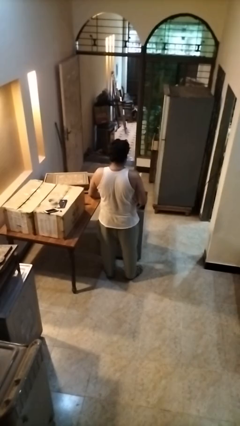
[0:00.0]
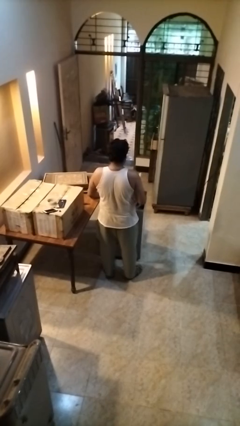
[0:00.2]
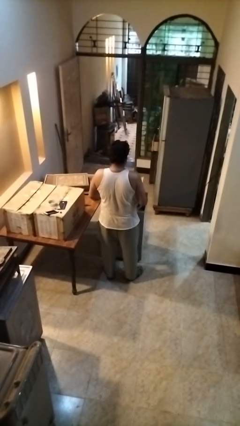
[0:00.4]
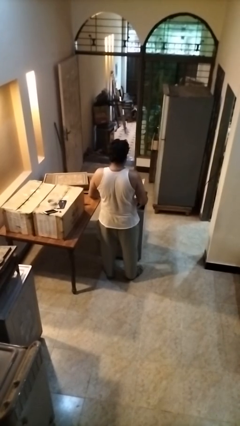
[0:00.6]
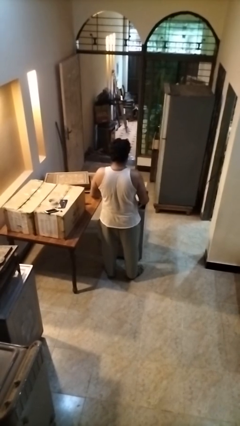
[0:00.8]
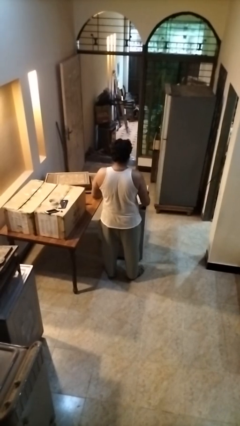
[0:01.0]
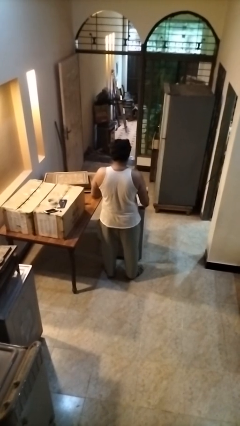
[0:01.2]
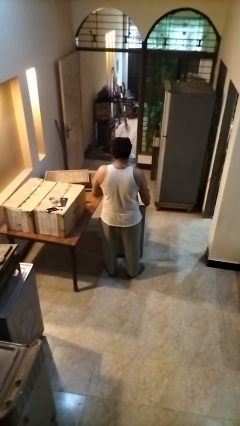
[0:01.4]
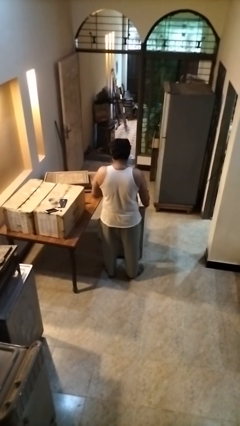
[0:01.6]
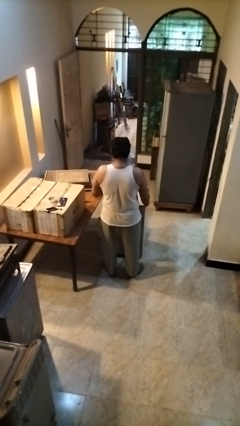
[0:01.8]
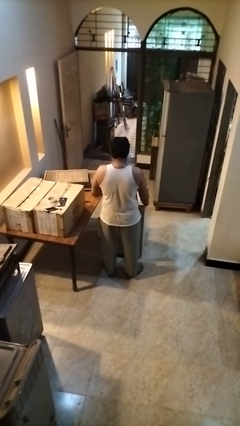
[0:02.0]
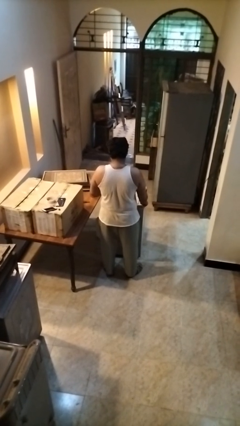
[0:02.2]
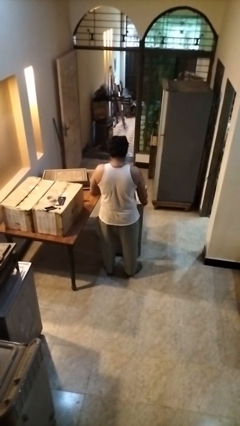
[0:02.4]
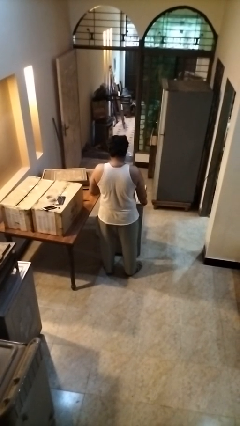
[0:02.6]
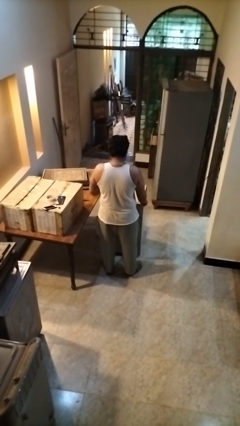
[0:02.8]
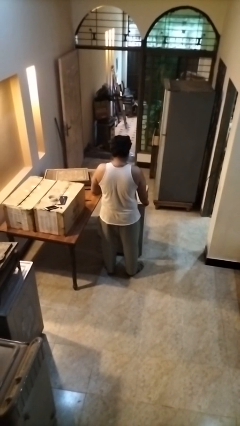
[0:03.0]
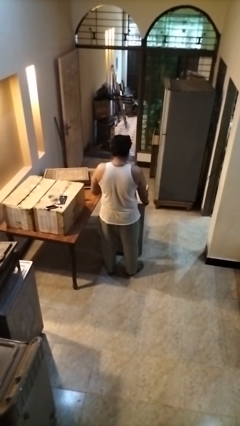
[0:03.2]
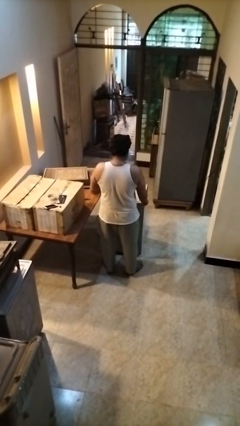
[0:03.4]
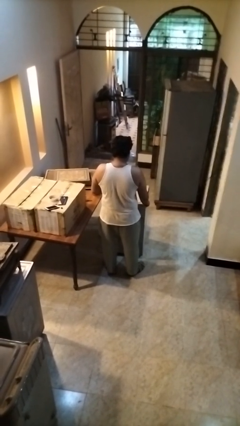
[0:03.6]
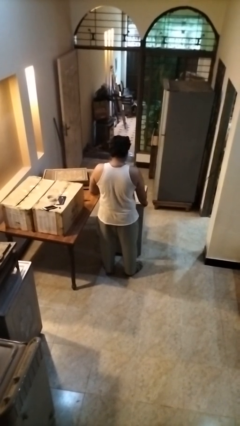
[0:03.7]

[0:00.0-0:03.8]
person closes clothes washer

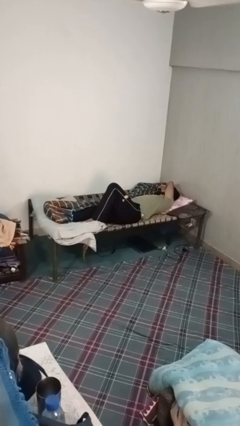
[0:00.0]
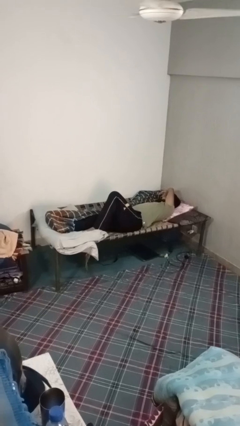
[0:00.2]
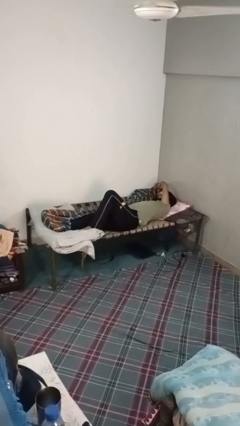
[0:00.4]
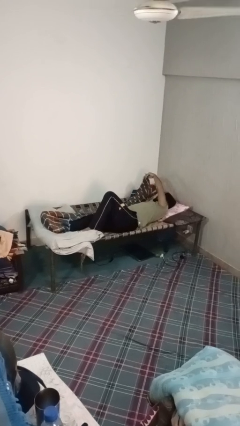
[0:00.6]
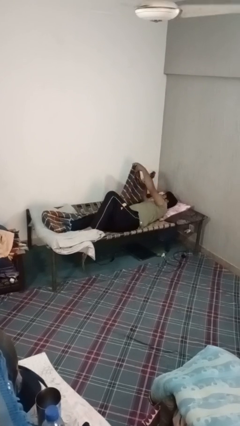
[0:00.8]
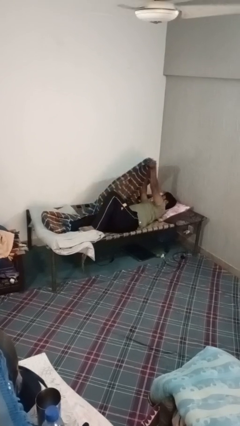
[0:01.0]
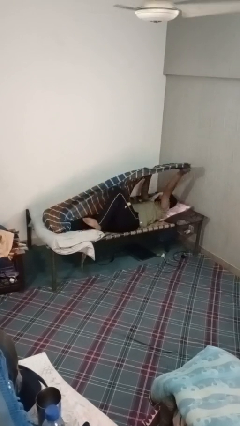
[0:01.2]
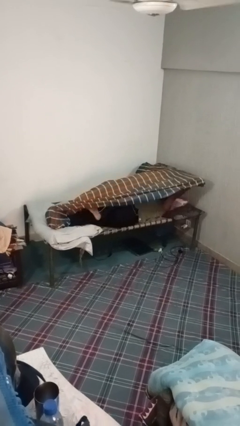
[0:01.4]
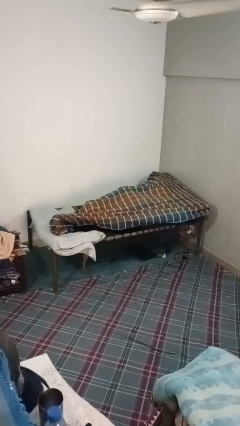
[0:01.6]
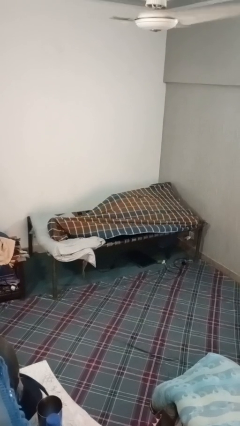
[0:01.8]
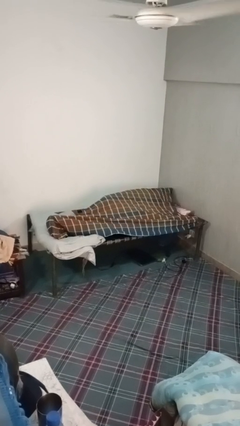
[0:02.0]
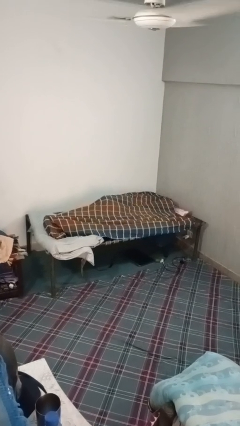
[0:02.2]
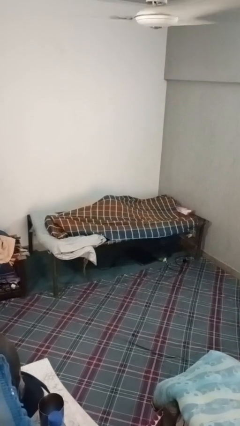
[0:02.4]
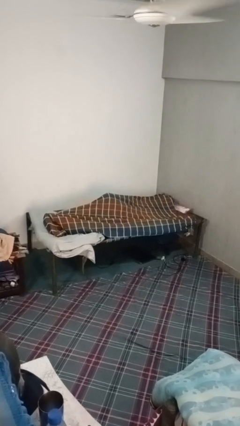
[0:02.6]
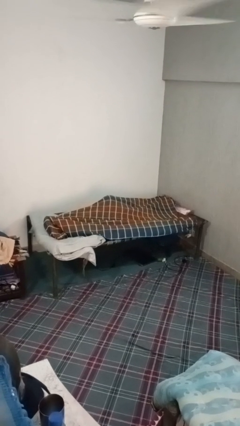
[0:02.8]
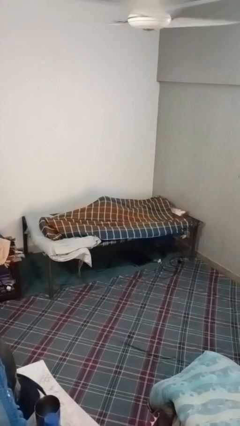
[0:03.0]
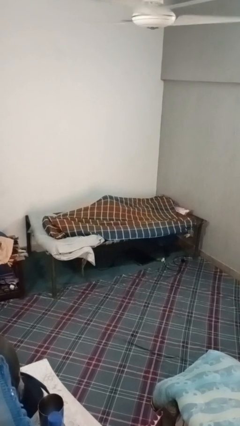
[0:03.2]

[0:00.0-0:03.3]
person covers with bedsheets

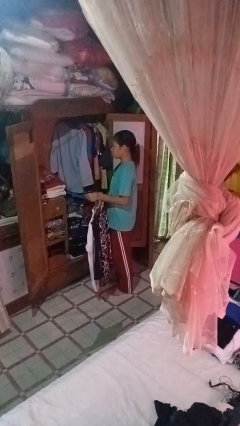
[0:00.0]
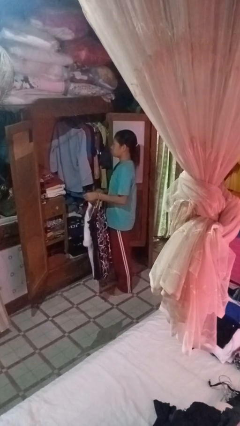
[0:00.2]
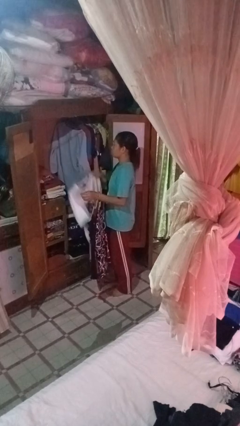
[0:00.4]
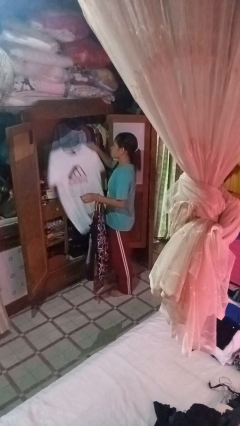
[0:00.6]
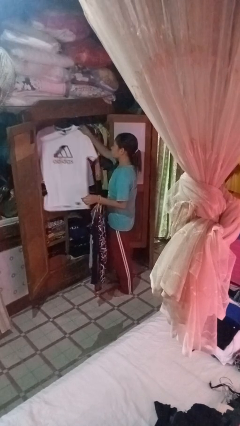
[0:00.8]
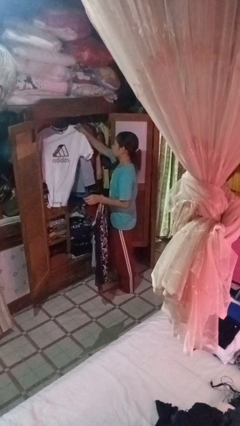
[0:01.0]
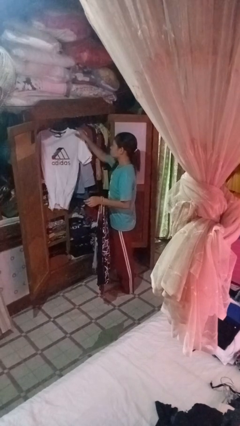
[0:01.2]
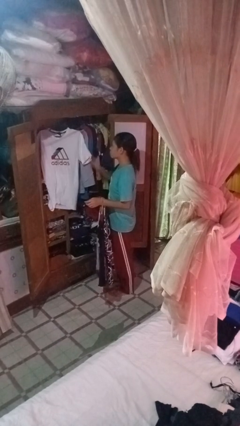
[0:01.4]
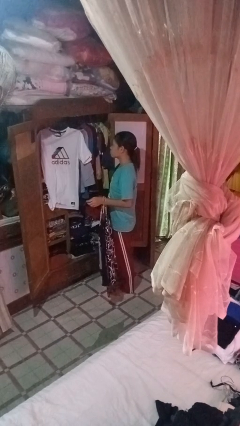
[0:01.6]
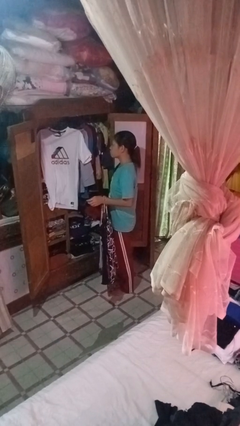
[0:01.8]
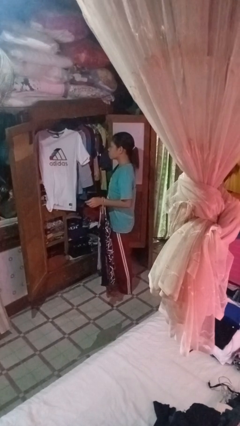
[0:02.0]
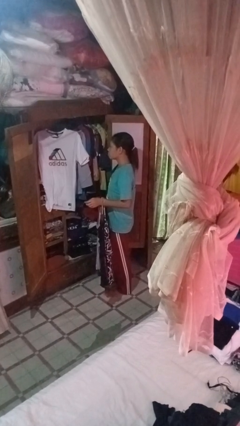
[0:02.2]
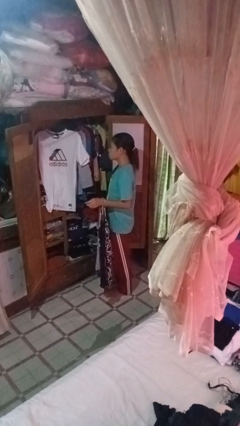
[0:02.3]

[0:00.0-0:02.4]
person puts clothes into closet

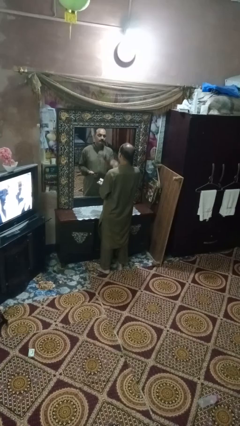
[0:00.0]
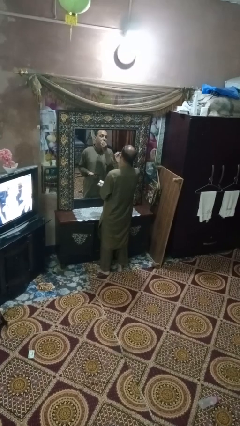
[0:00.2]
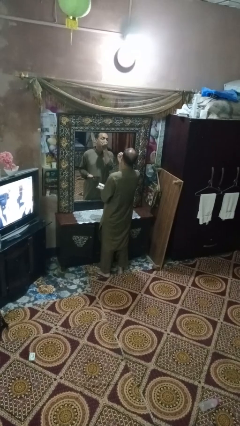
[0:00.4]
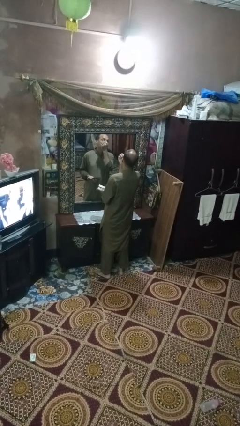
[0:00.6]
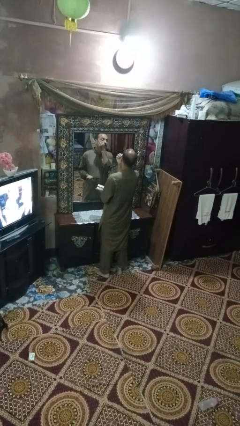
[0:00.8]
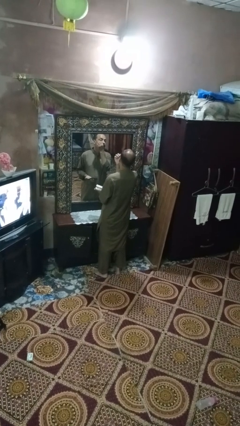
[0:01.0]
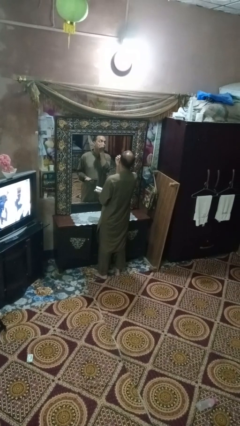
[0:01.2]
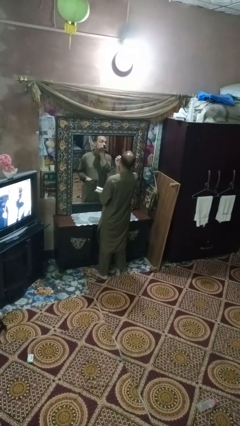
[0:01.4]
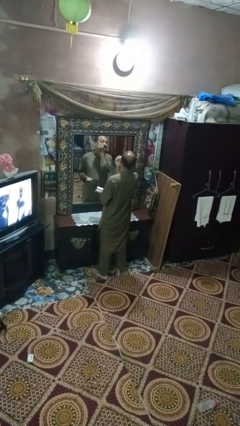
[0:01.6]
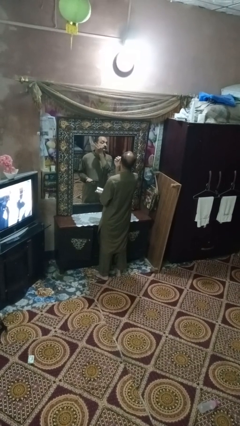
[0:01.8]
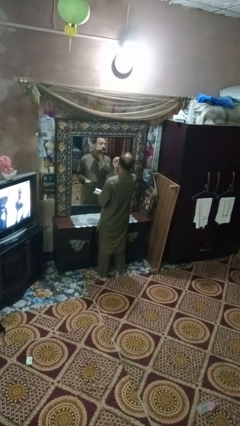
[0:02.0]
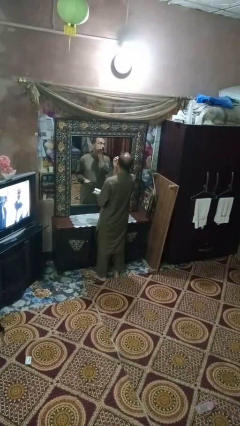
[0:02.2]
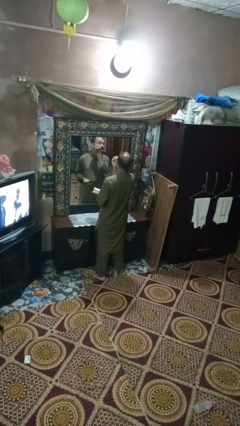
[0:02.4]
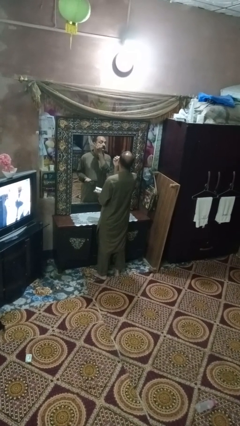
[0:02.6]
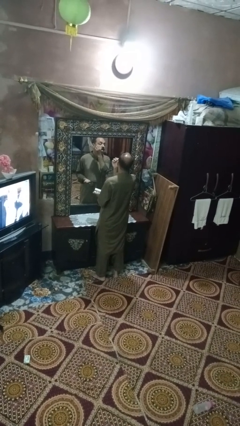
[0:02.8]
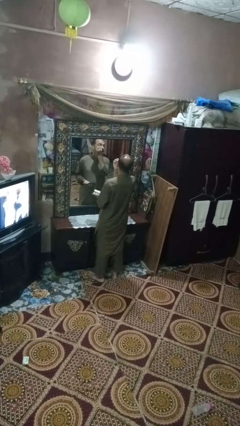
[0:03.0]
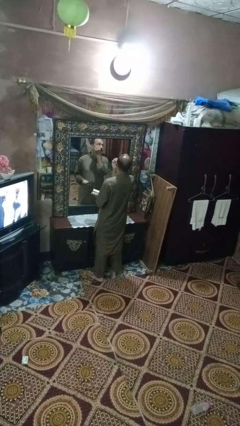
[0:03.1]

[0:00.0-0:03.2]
person applies eye makeup

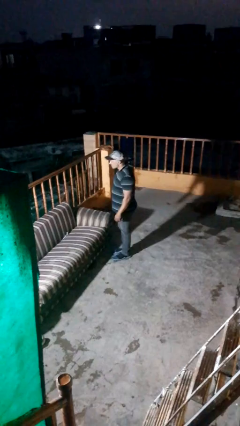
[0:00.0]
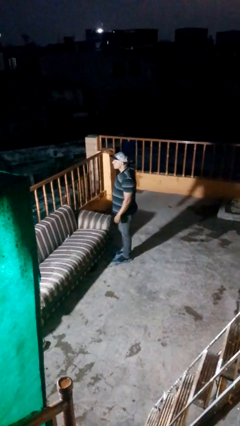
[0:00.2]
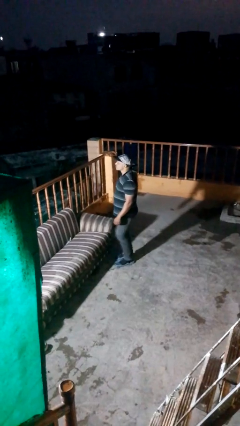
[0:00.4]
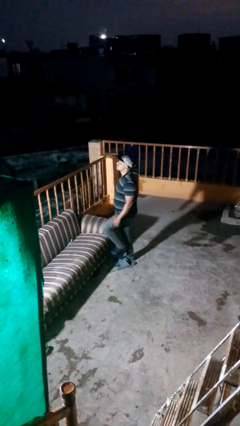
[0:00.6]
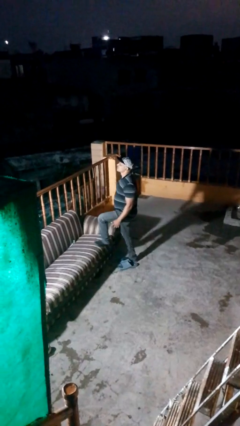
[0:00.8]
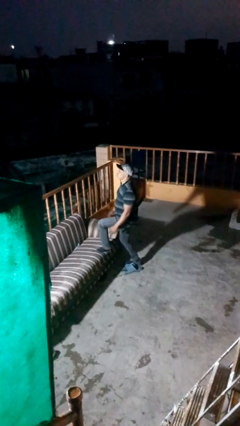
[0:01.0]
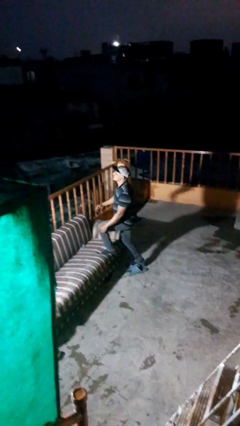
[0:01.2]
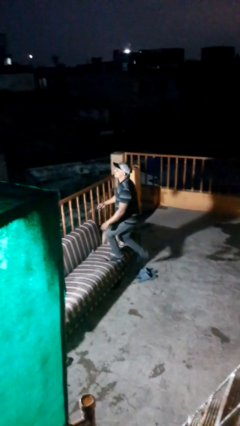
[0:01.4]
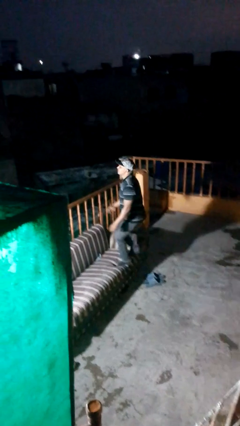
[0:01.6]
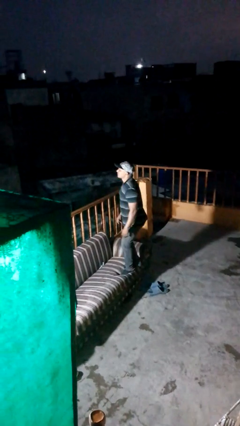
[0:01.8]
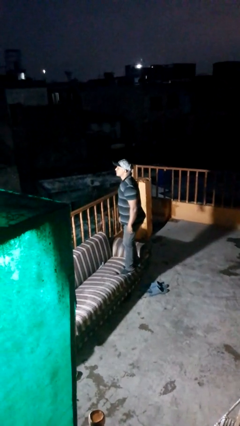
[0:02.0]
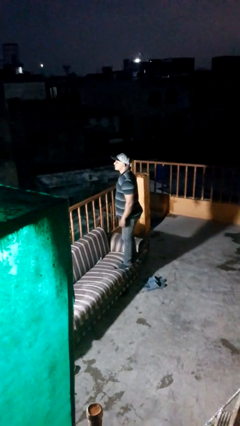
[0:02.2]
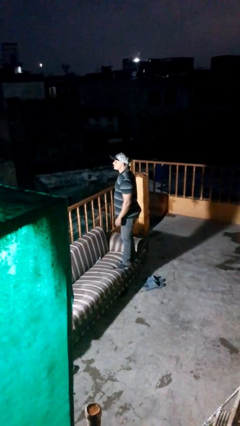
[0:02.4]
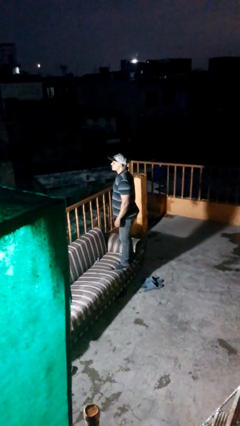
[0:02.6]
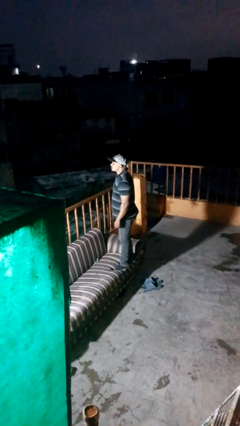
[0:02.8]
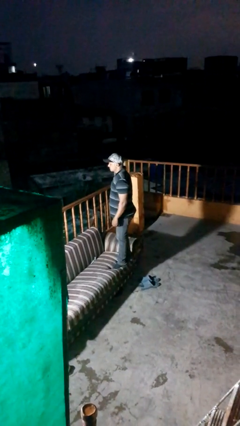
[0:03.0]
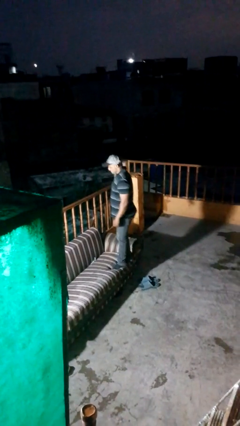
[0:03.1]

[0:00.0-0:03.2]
person climbs on couch

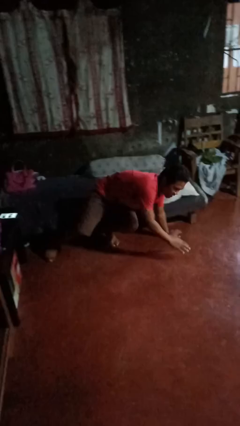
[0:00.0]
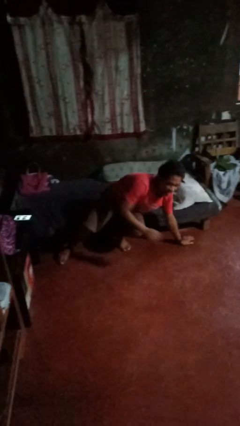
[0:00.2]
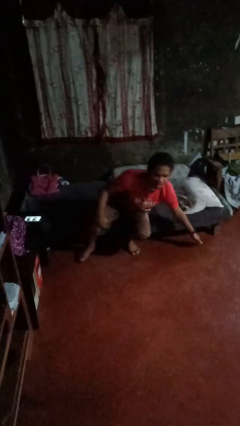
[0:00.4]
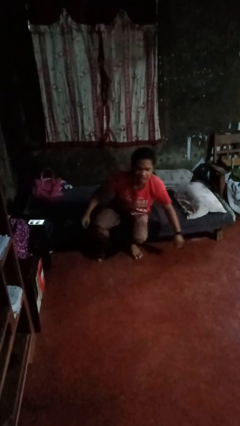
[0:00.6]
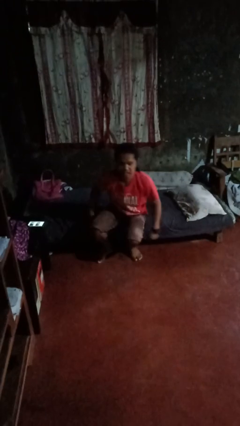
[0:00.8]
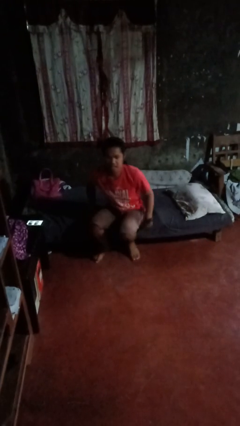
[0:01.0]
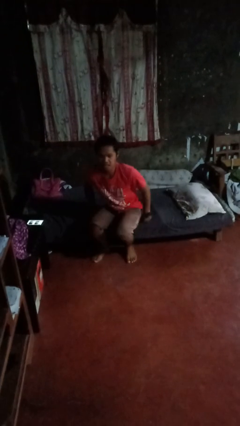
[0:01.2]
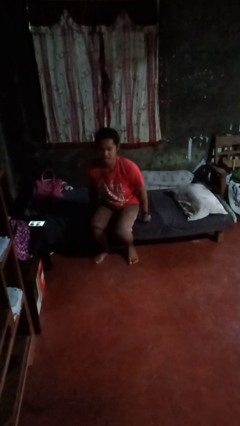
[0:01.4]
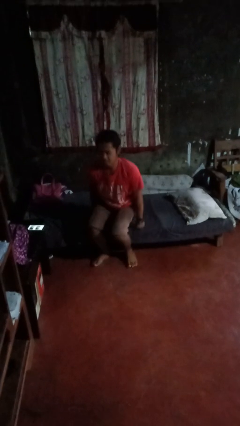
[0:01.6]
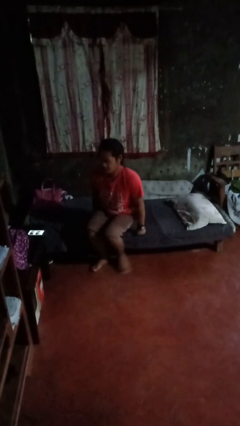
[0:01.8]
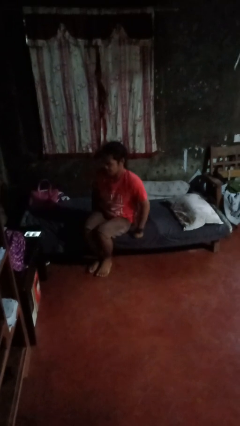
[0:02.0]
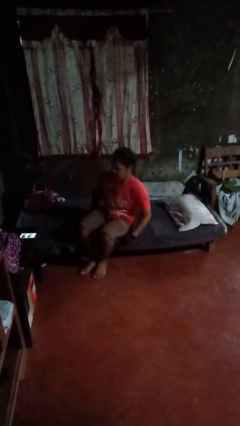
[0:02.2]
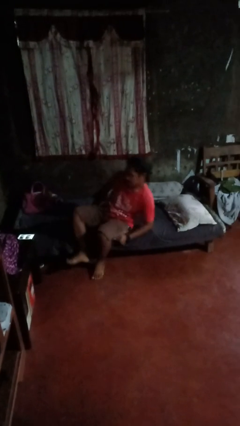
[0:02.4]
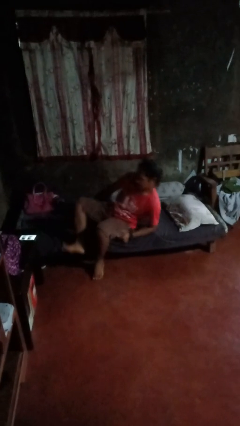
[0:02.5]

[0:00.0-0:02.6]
person stands up from floor
